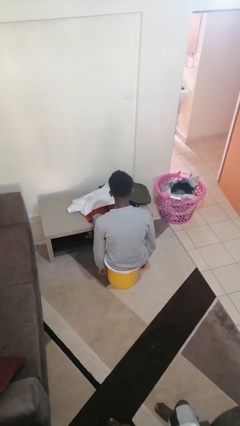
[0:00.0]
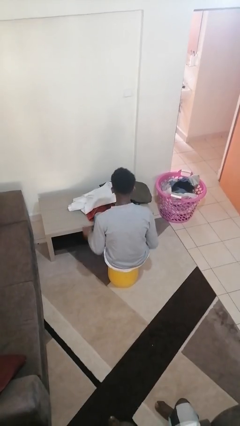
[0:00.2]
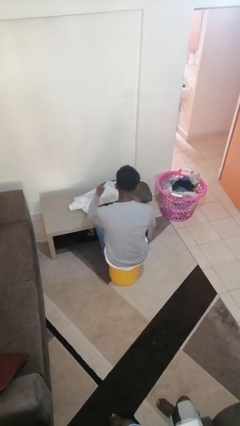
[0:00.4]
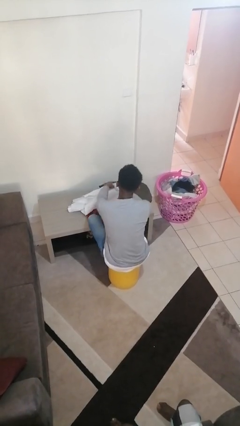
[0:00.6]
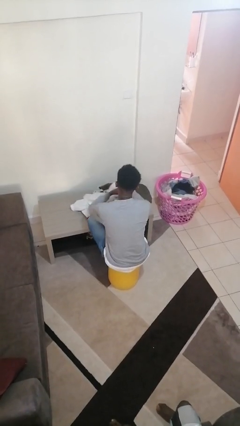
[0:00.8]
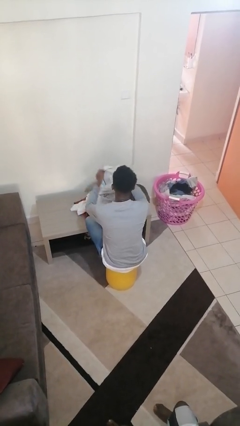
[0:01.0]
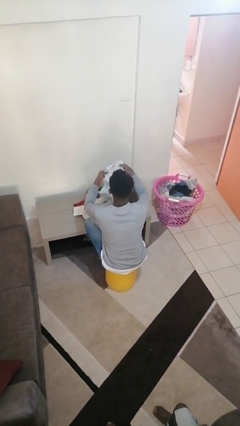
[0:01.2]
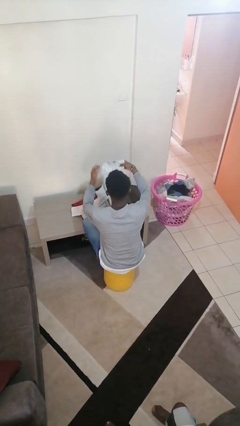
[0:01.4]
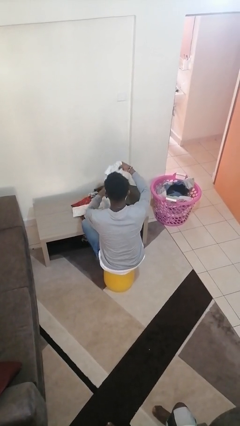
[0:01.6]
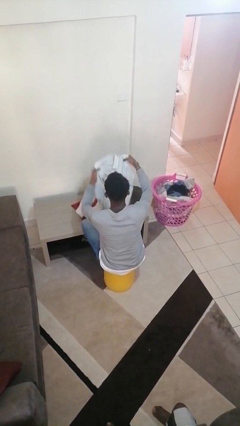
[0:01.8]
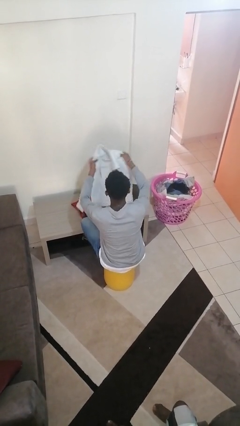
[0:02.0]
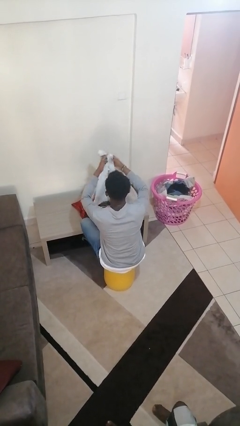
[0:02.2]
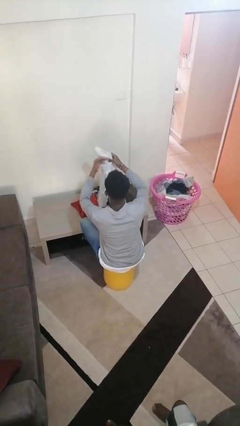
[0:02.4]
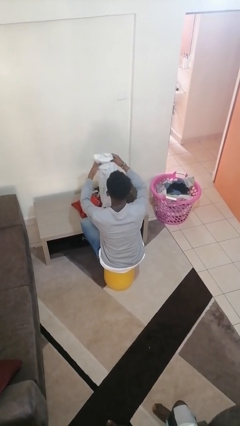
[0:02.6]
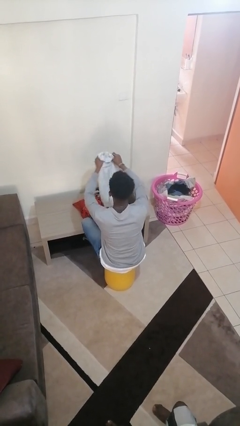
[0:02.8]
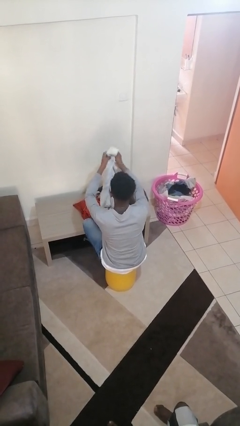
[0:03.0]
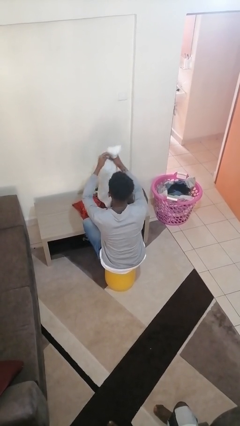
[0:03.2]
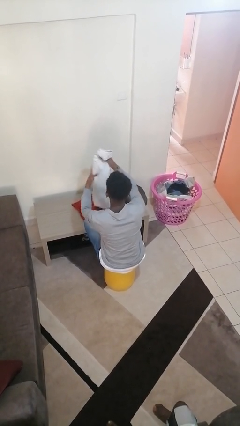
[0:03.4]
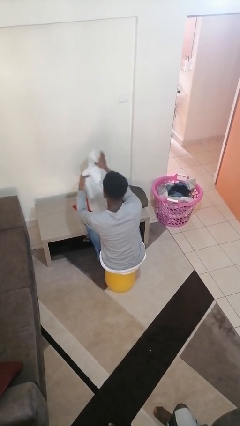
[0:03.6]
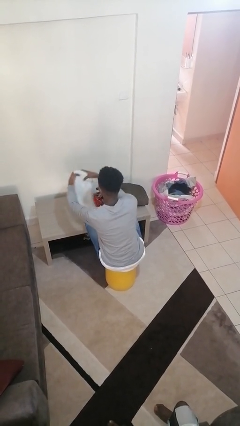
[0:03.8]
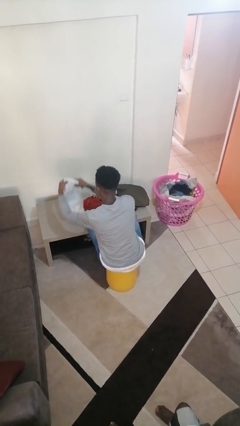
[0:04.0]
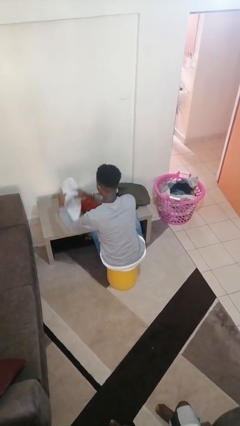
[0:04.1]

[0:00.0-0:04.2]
person folds shirt

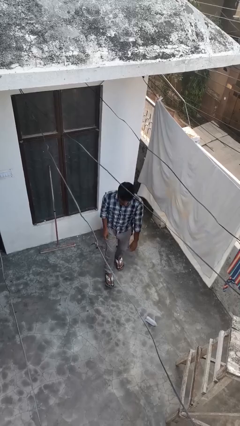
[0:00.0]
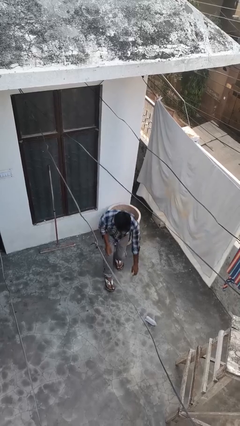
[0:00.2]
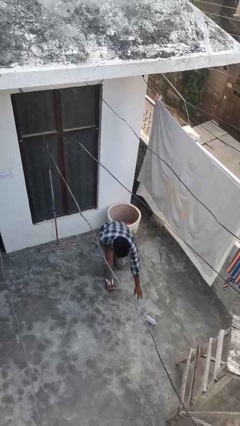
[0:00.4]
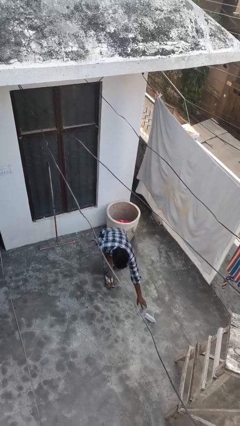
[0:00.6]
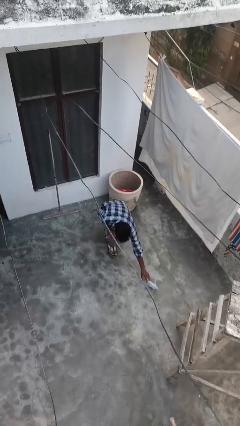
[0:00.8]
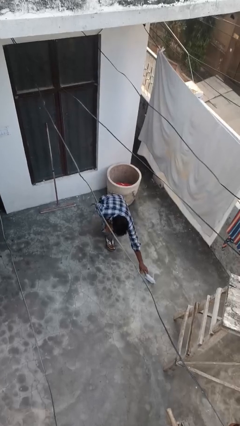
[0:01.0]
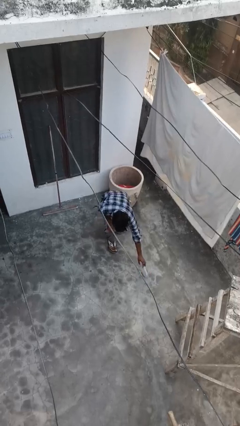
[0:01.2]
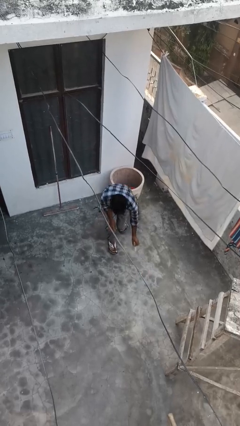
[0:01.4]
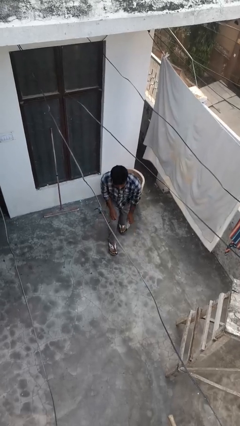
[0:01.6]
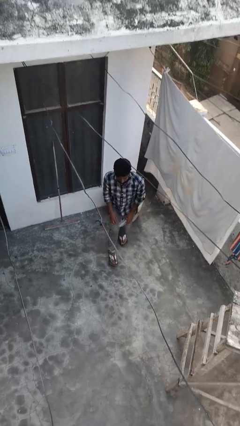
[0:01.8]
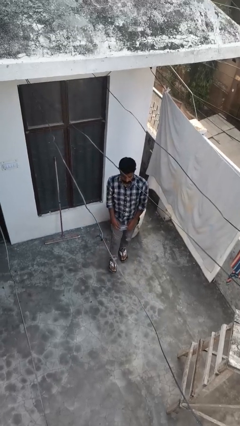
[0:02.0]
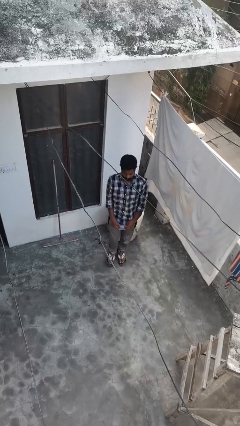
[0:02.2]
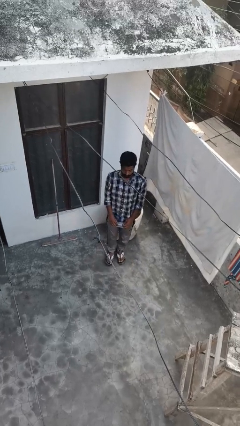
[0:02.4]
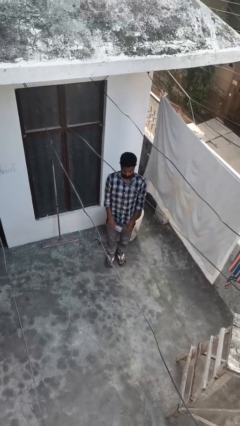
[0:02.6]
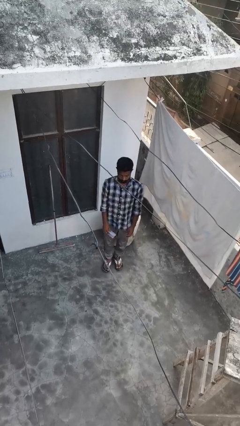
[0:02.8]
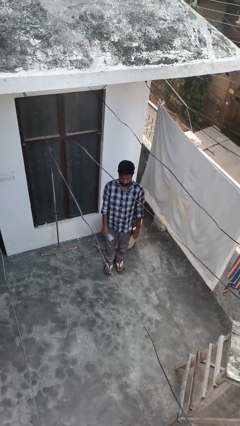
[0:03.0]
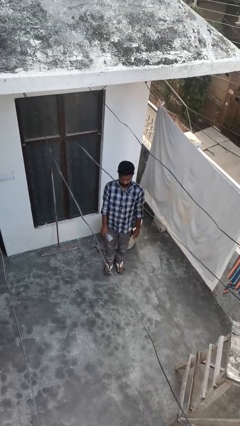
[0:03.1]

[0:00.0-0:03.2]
person picks up object from floor

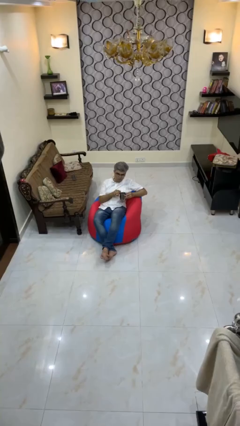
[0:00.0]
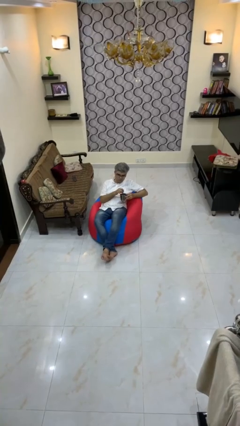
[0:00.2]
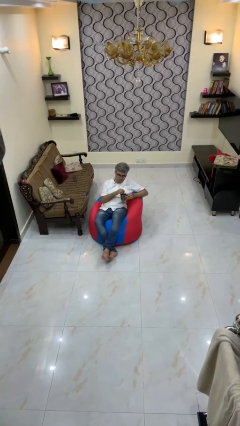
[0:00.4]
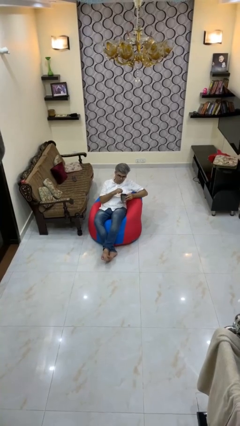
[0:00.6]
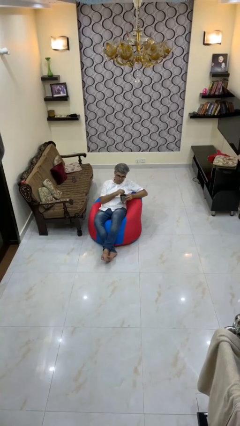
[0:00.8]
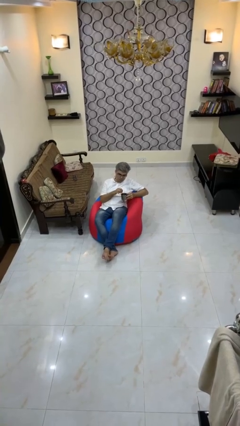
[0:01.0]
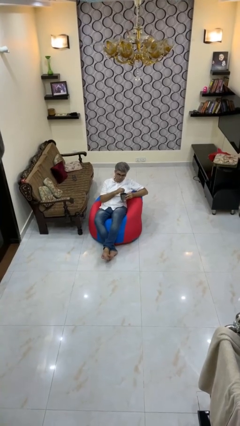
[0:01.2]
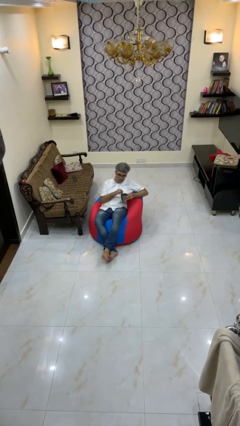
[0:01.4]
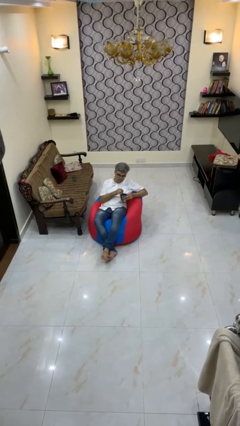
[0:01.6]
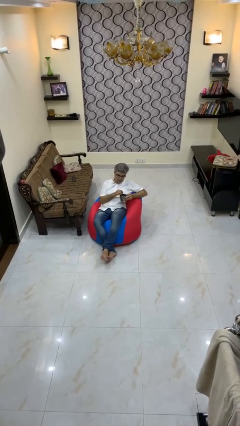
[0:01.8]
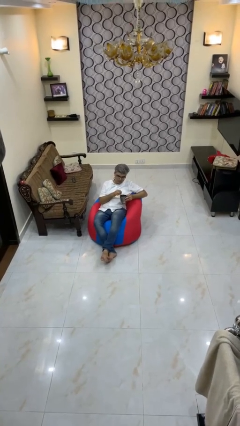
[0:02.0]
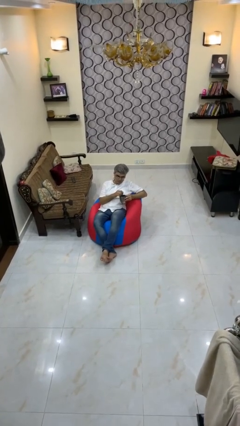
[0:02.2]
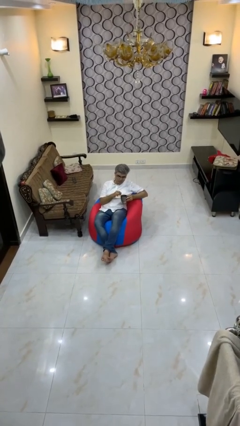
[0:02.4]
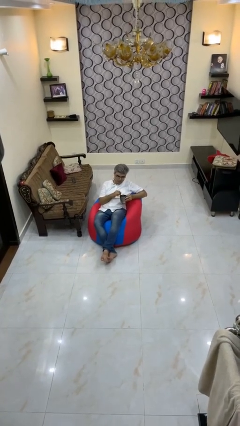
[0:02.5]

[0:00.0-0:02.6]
person stirs mug

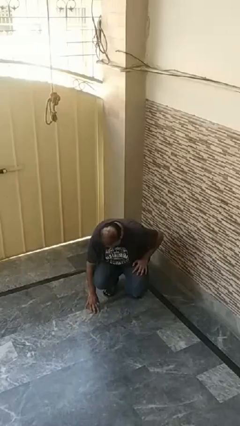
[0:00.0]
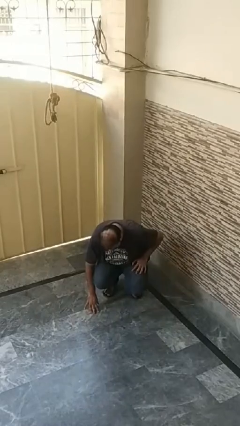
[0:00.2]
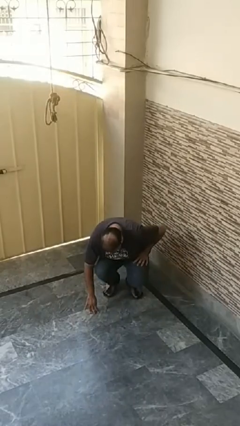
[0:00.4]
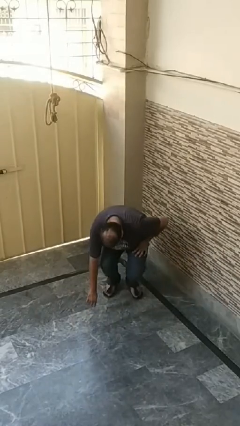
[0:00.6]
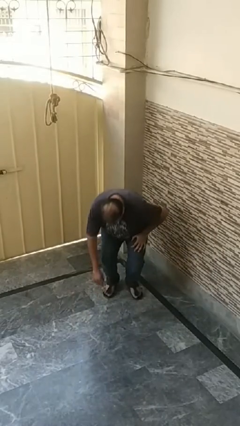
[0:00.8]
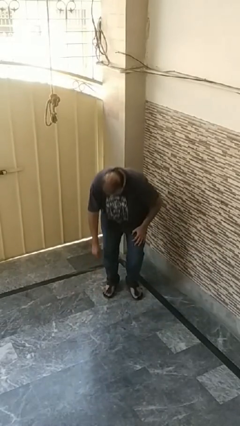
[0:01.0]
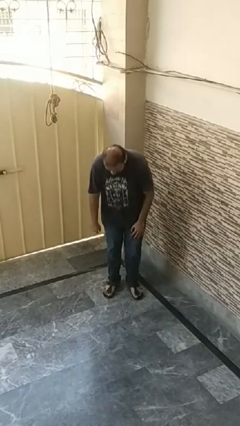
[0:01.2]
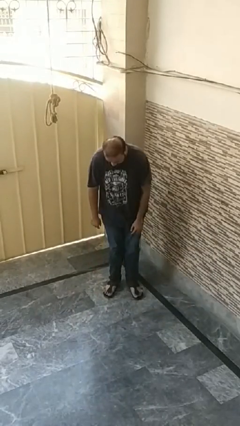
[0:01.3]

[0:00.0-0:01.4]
person stands up from floor

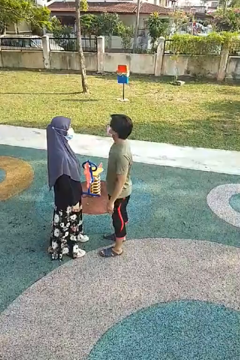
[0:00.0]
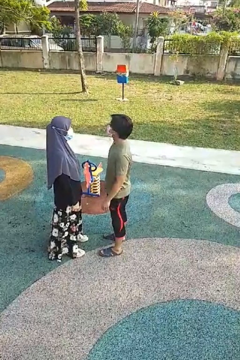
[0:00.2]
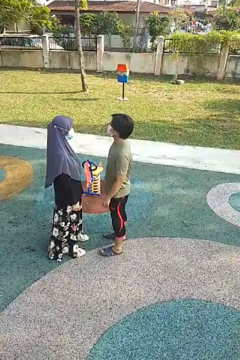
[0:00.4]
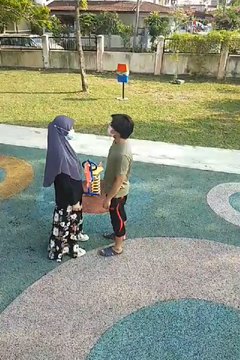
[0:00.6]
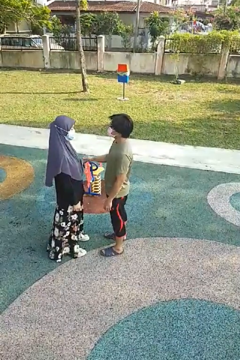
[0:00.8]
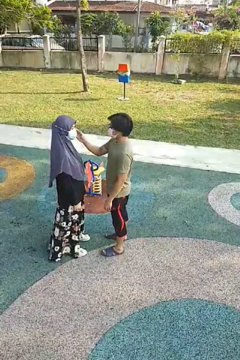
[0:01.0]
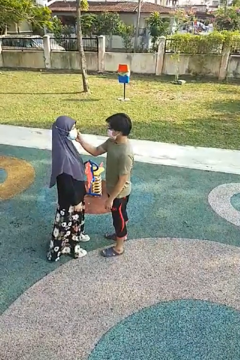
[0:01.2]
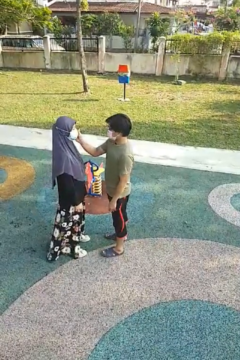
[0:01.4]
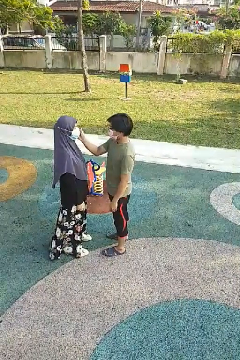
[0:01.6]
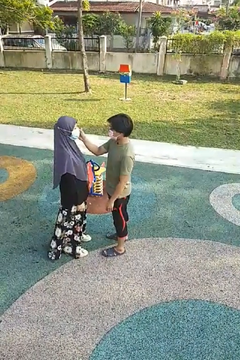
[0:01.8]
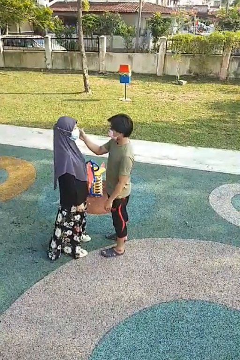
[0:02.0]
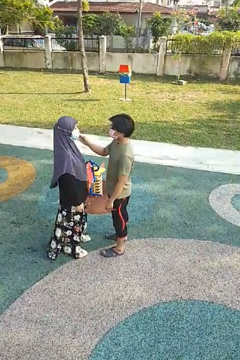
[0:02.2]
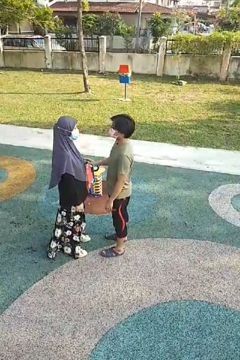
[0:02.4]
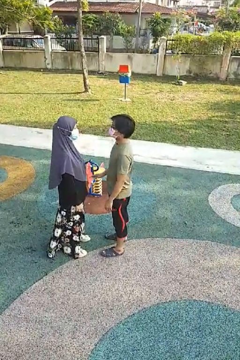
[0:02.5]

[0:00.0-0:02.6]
person touches face of person

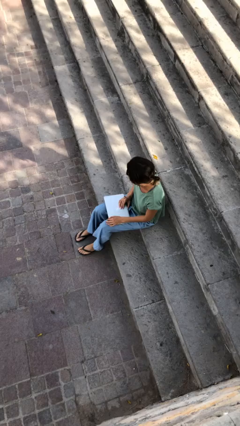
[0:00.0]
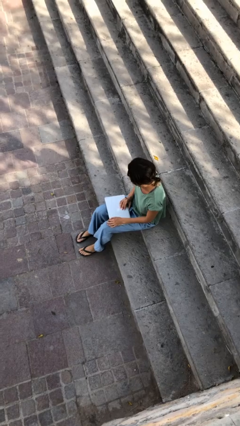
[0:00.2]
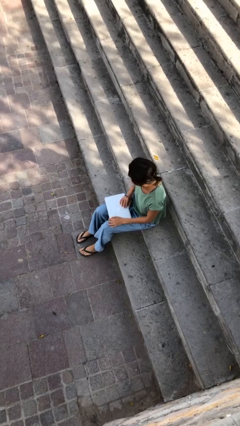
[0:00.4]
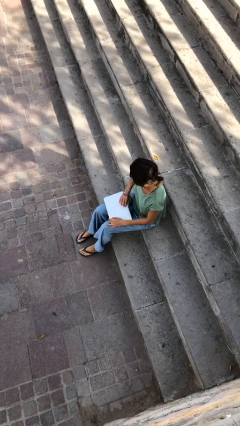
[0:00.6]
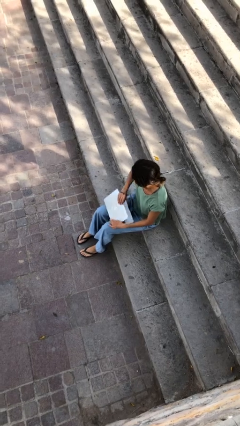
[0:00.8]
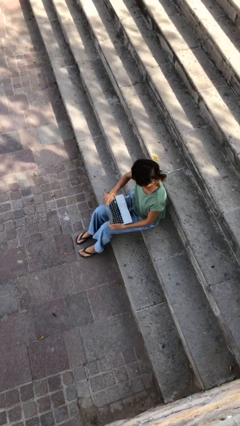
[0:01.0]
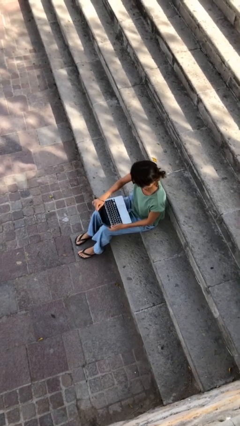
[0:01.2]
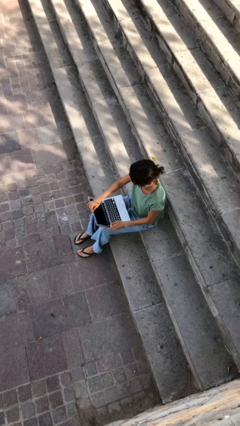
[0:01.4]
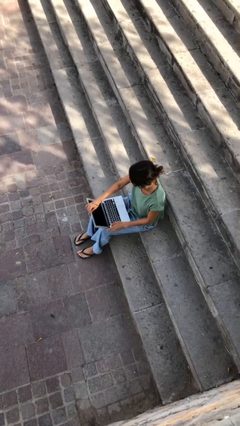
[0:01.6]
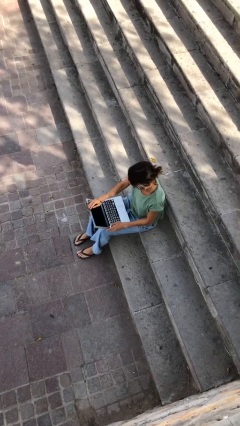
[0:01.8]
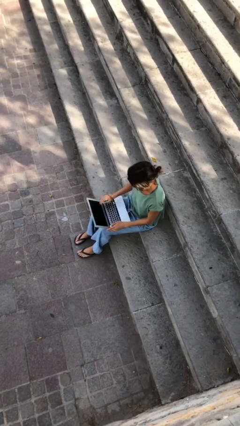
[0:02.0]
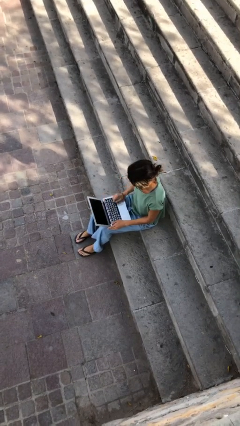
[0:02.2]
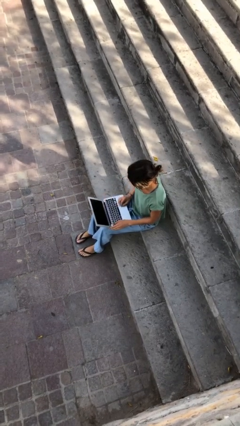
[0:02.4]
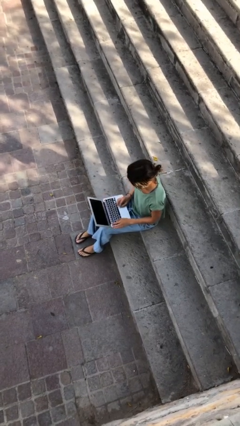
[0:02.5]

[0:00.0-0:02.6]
person interacts with laptop

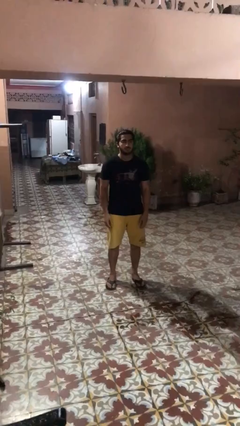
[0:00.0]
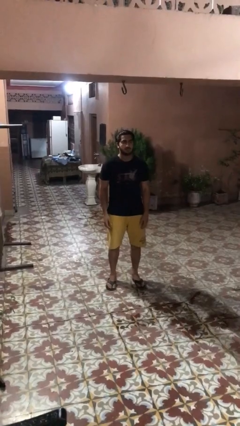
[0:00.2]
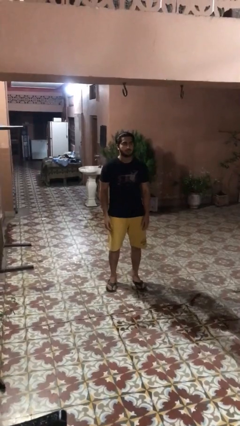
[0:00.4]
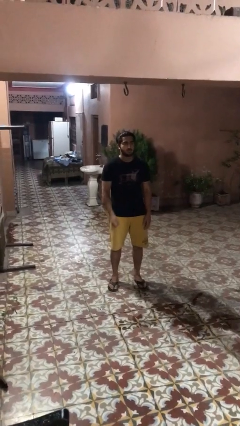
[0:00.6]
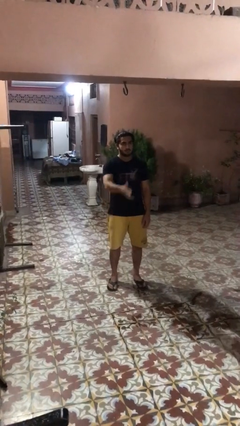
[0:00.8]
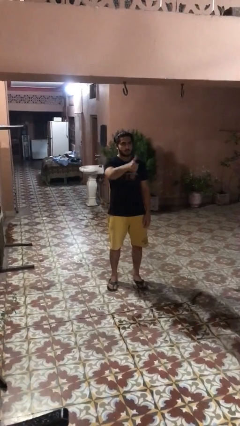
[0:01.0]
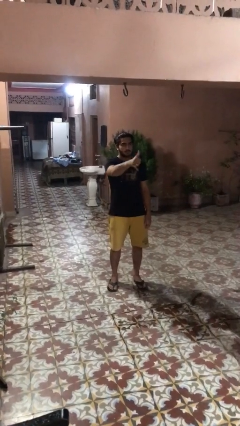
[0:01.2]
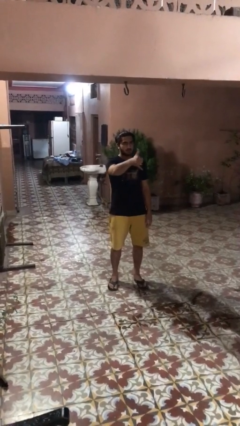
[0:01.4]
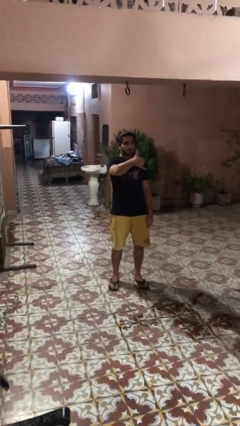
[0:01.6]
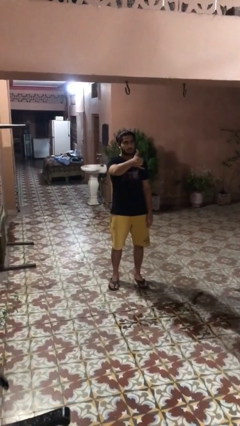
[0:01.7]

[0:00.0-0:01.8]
person gestures hang loose
